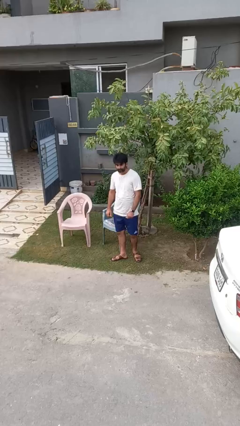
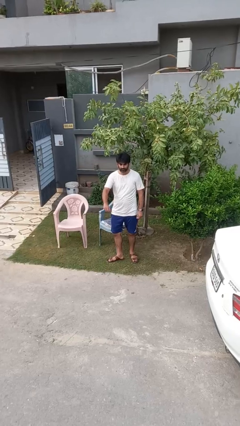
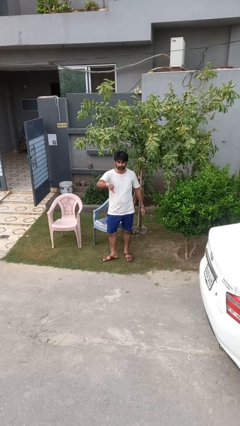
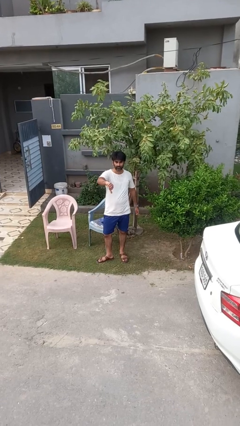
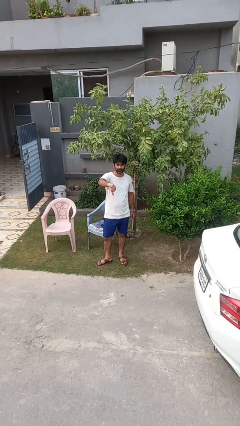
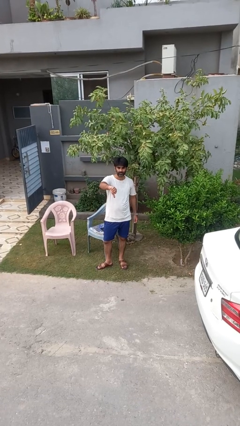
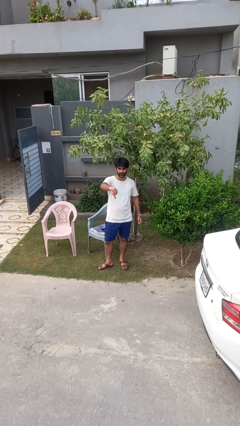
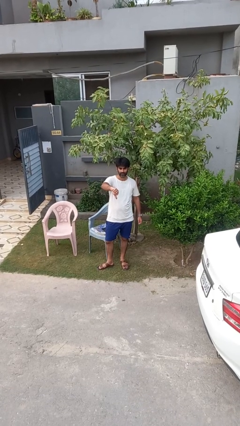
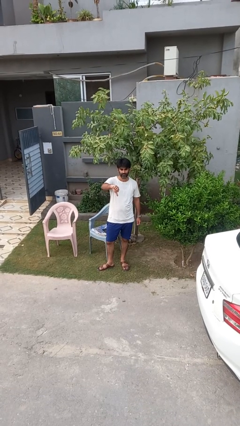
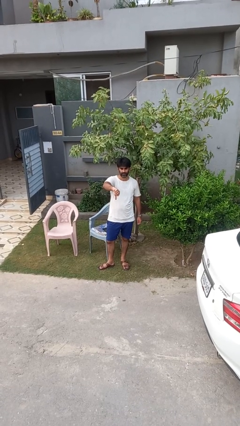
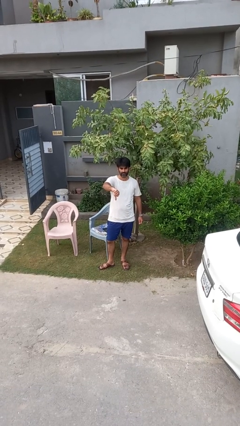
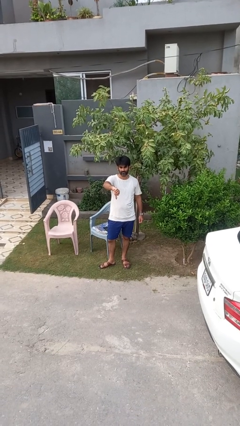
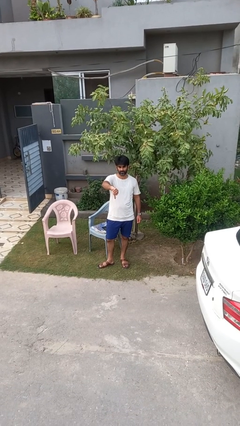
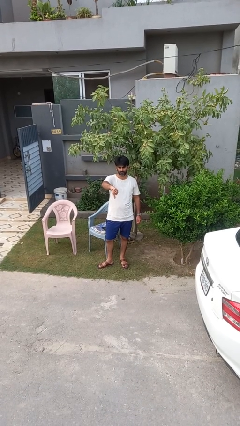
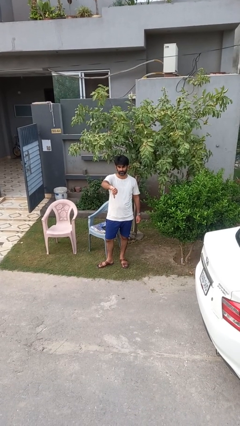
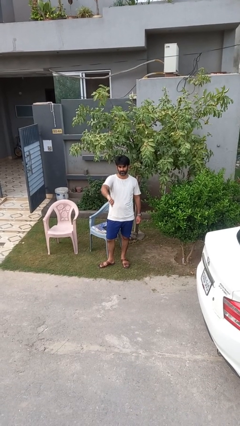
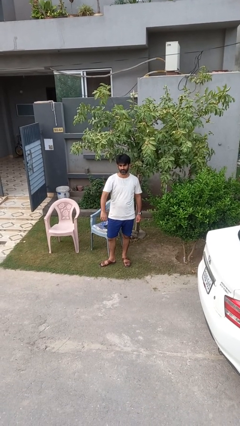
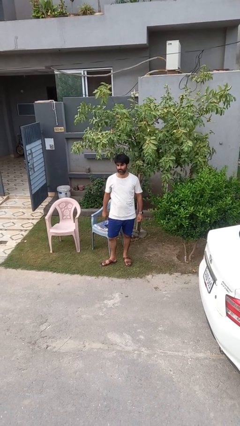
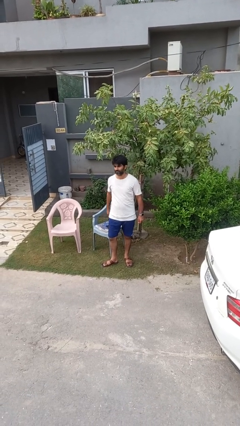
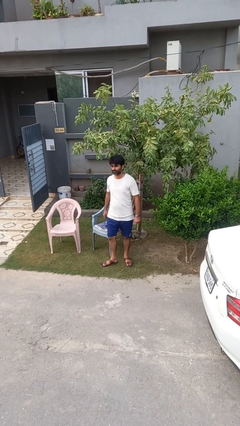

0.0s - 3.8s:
person gestures thumbs down

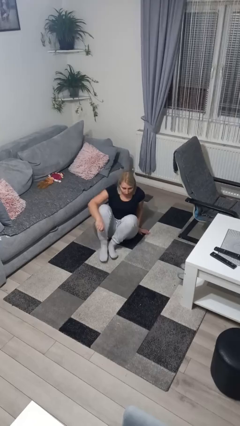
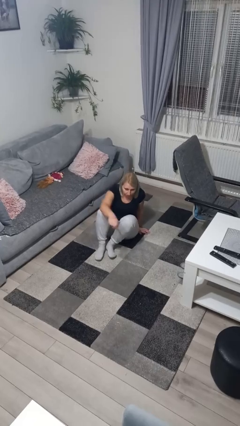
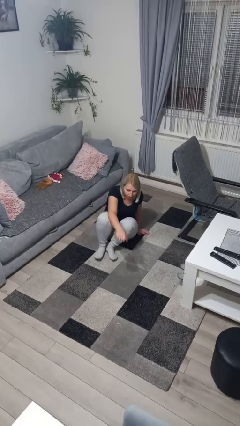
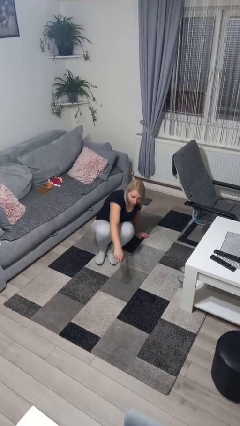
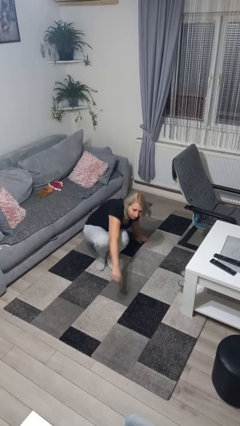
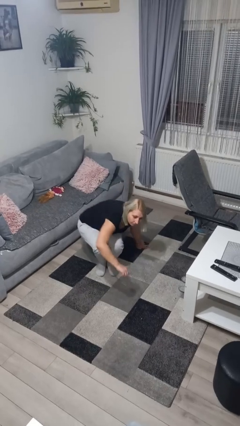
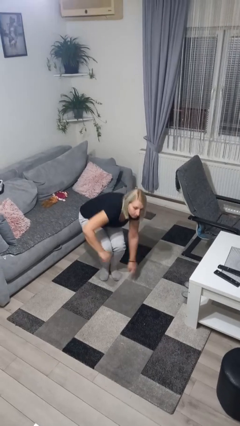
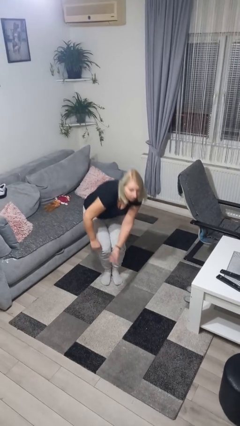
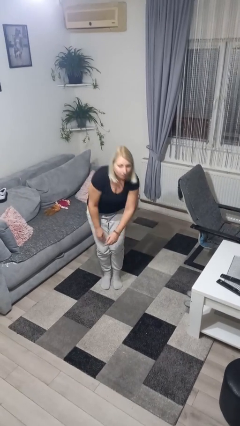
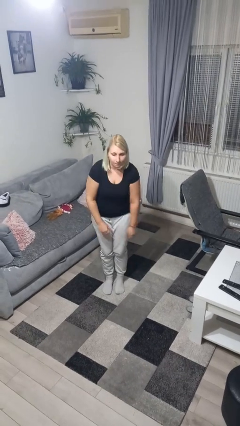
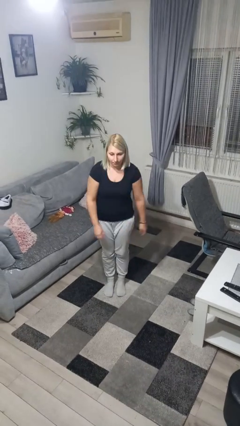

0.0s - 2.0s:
person stands up from floor

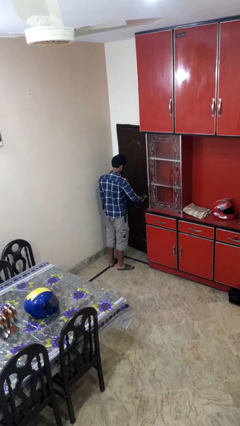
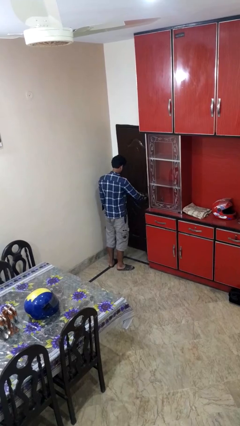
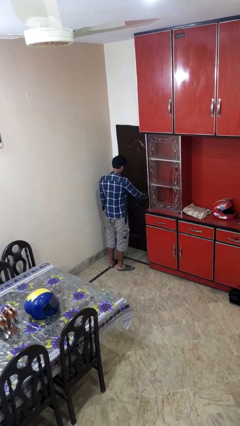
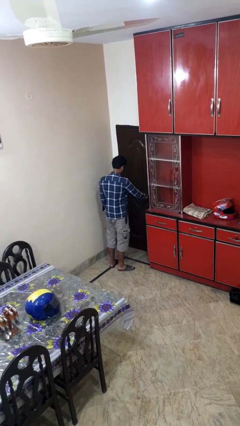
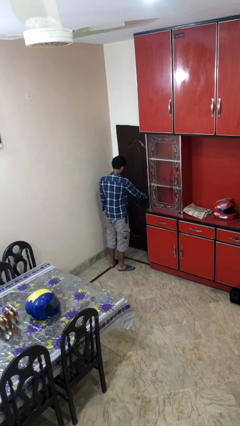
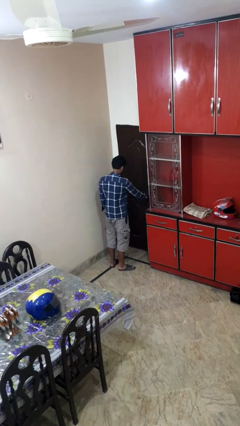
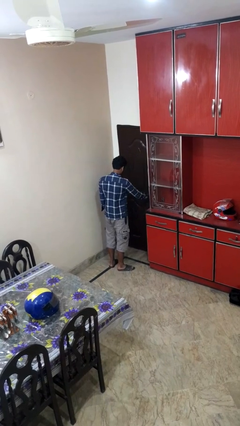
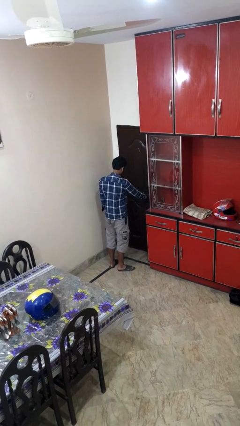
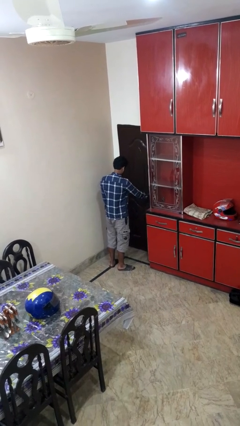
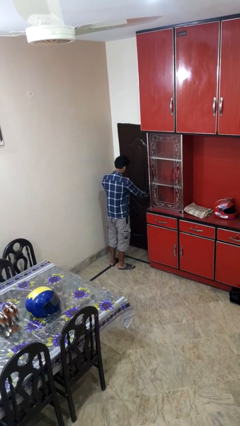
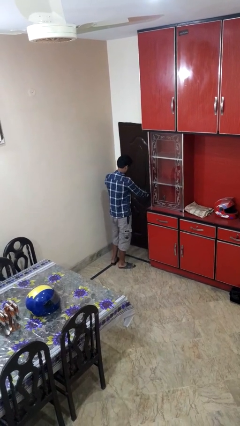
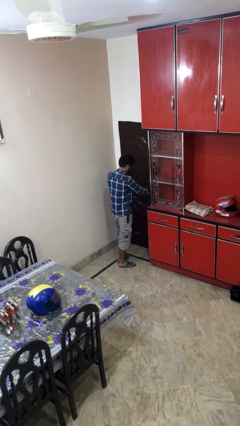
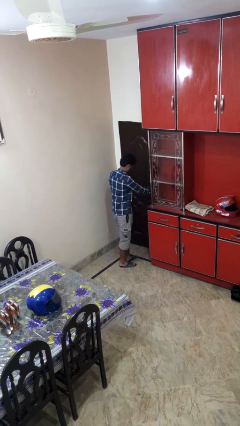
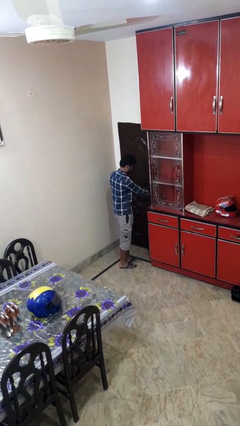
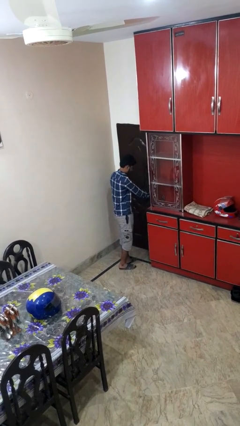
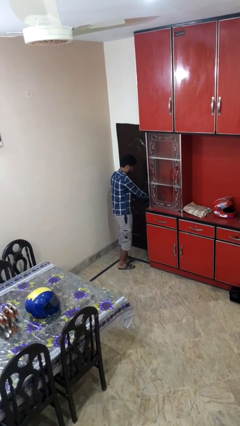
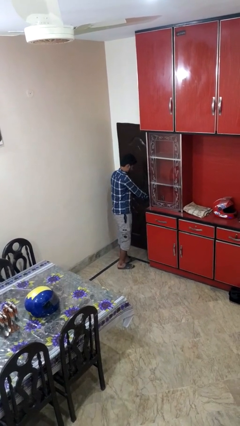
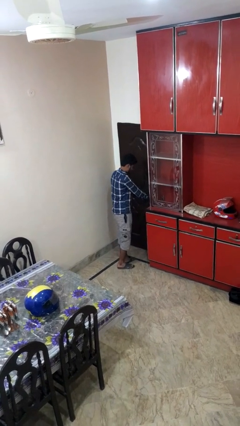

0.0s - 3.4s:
person closes facility door

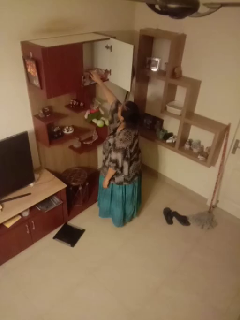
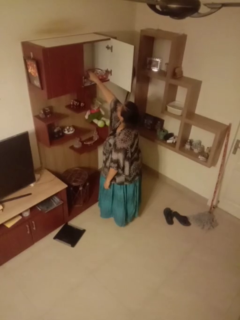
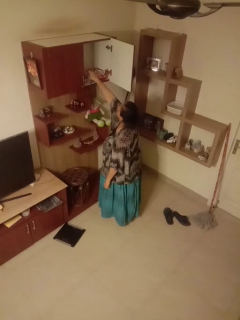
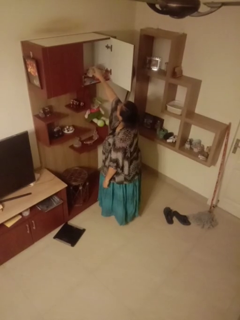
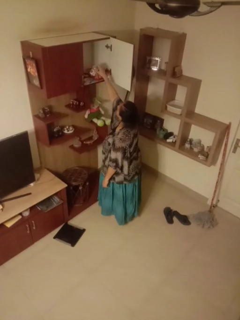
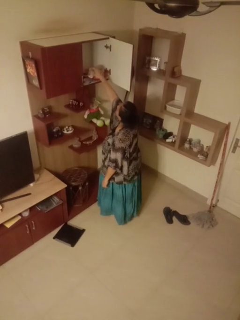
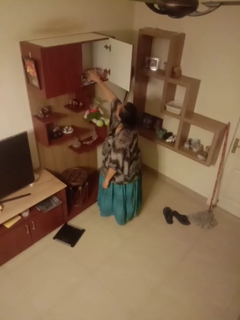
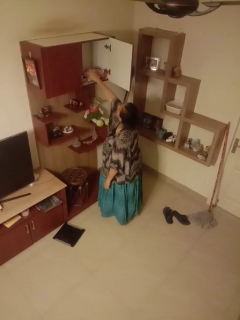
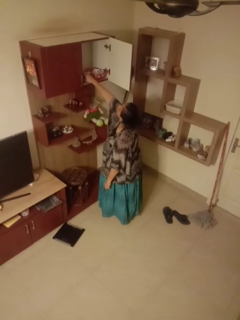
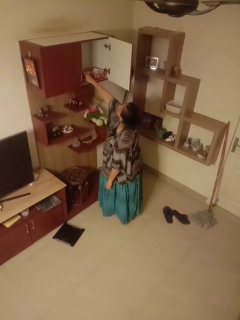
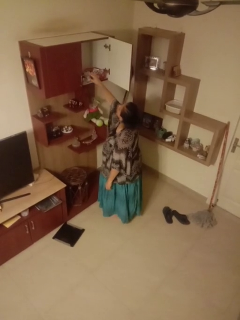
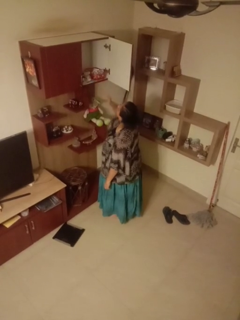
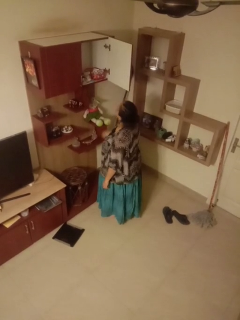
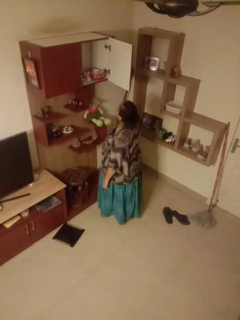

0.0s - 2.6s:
person searches in cabinet

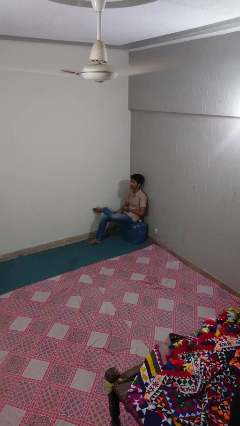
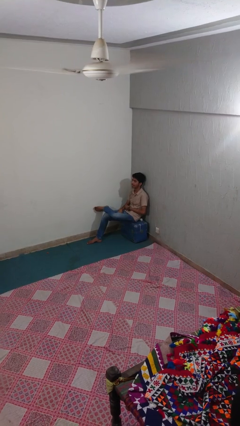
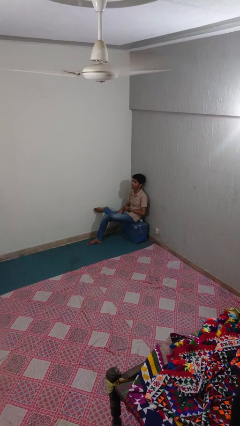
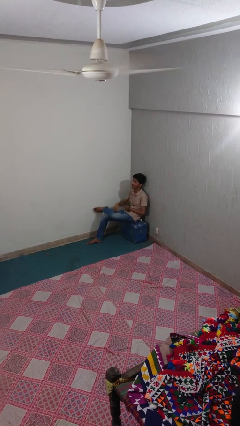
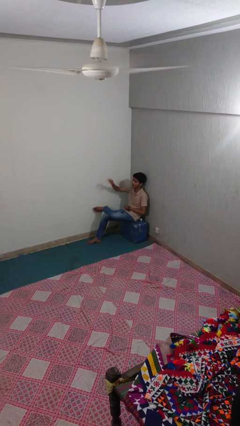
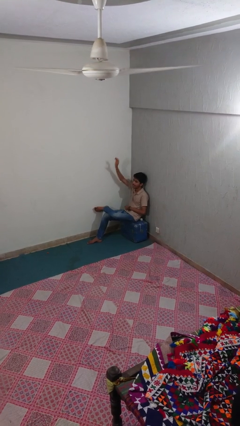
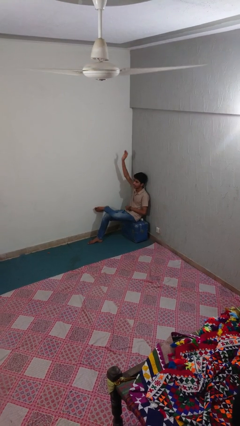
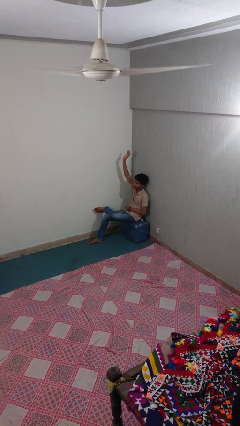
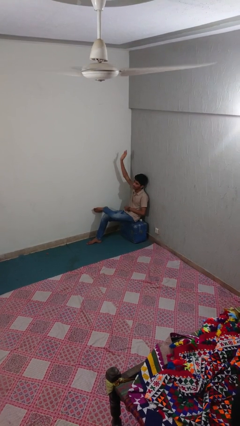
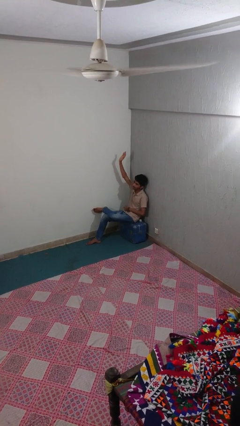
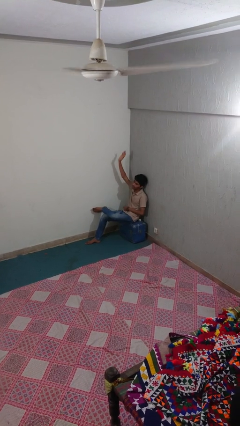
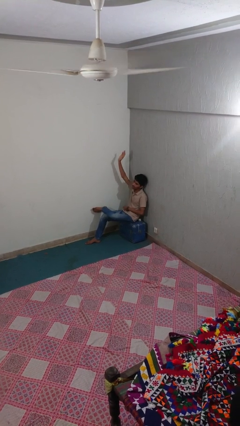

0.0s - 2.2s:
person gestures raise hand

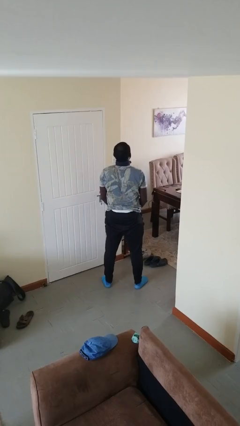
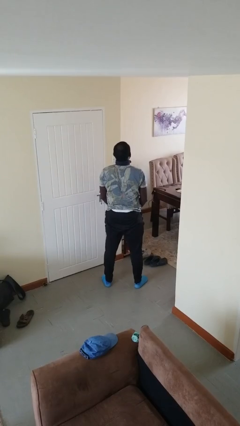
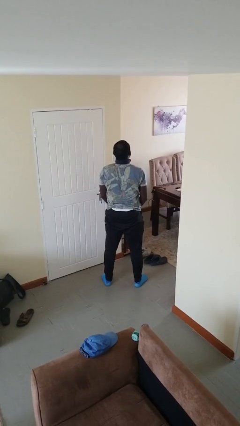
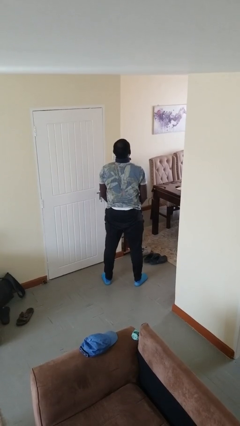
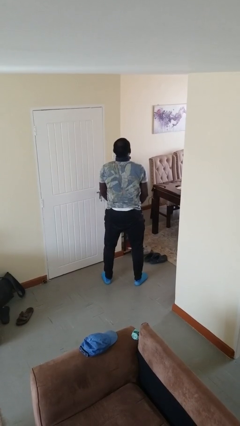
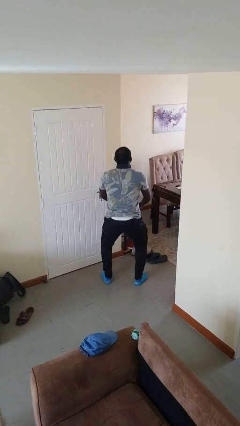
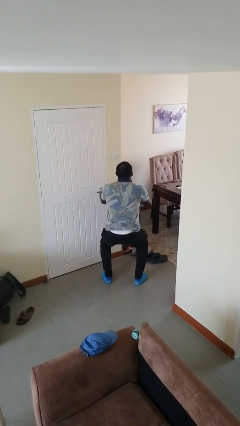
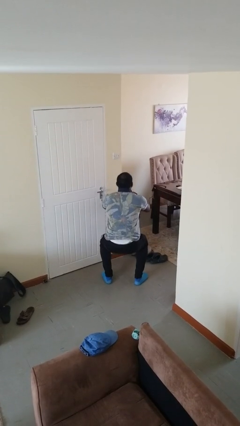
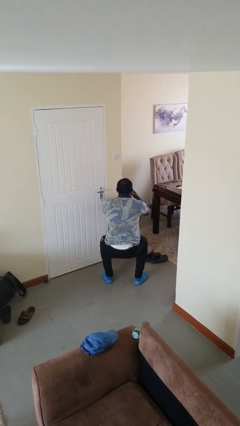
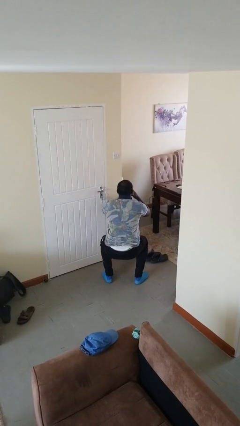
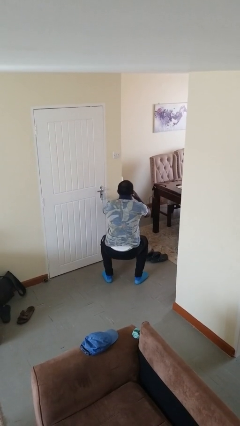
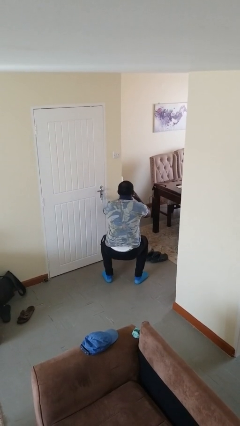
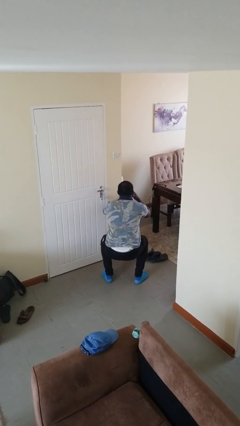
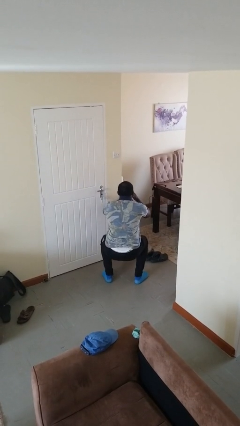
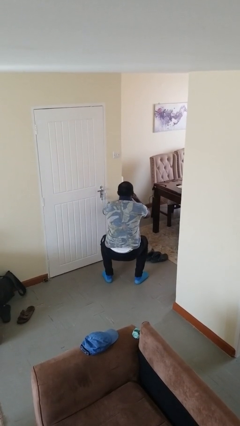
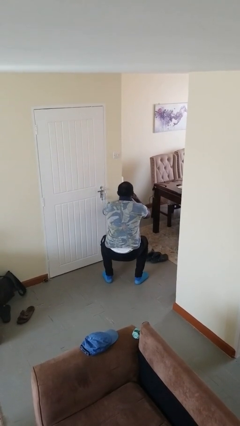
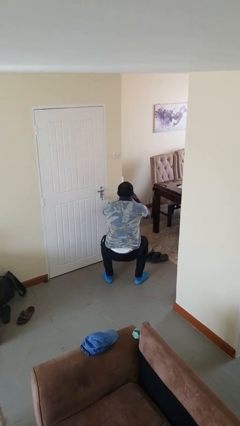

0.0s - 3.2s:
person squats

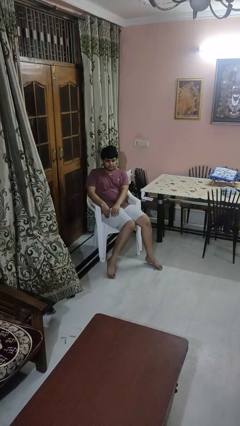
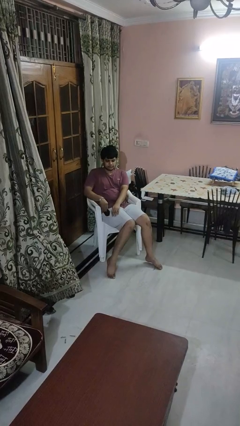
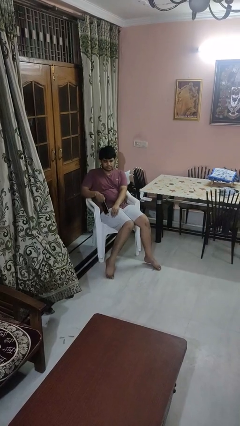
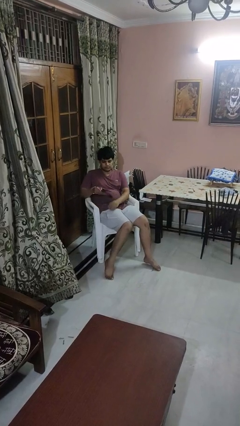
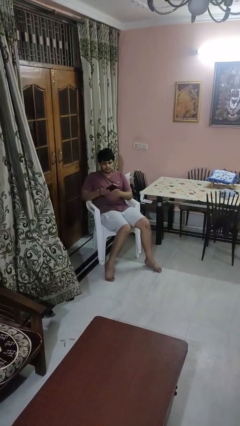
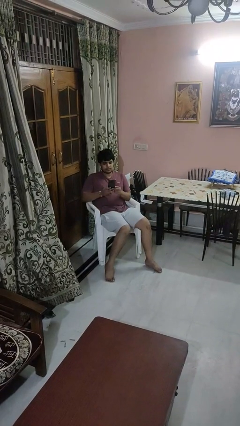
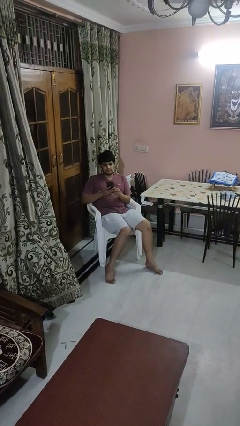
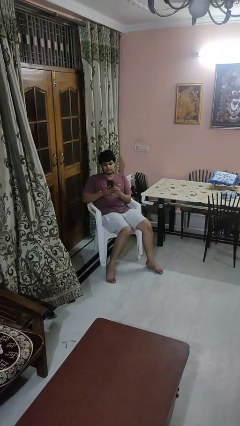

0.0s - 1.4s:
person takes phone from pocket
